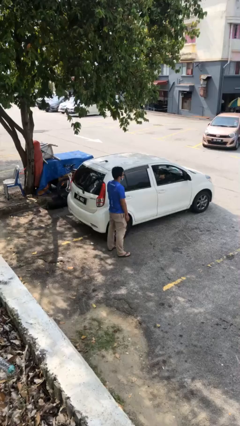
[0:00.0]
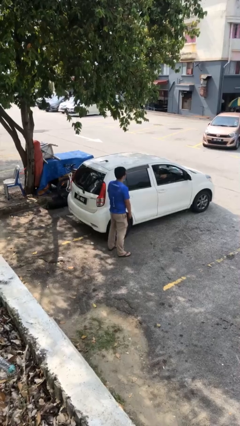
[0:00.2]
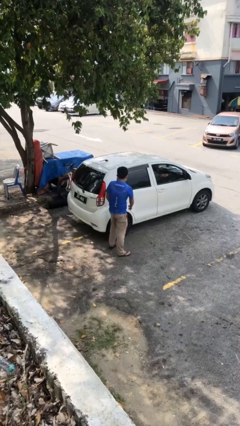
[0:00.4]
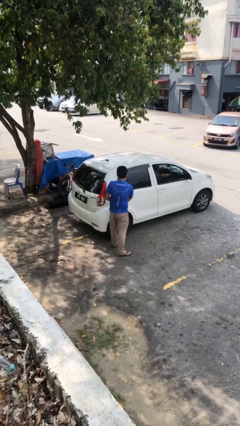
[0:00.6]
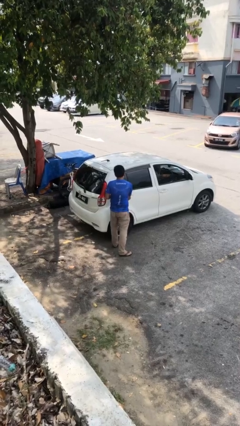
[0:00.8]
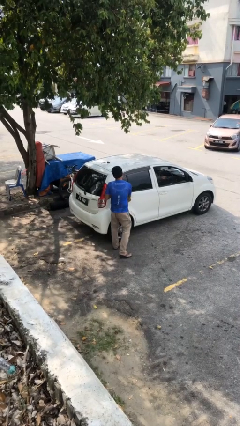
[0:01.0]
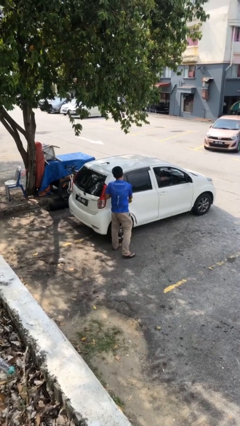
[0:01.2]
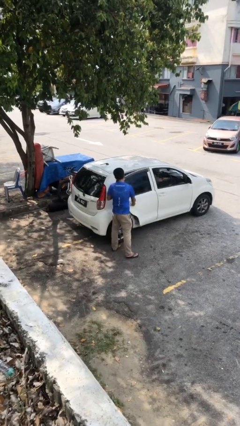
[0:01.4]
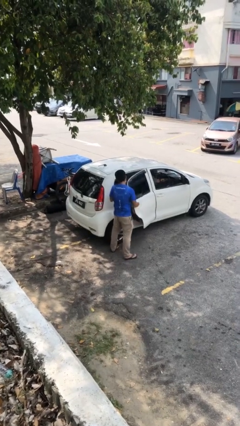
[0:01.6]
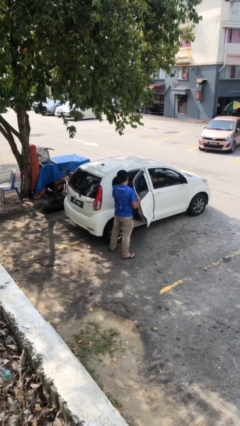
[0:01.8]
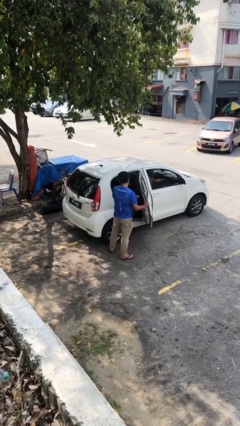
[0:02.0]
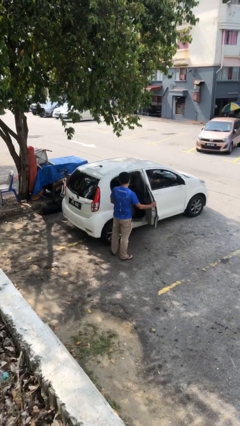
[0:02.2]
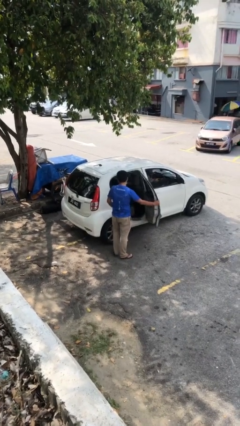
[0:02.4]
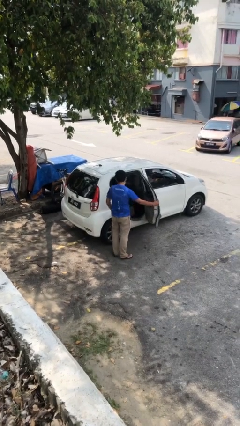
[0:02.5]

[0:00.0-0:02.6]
person opens car door

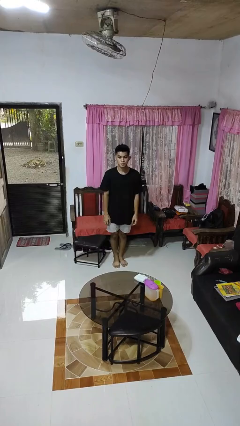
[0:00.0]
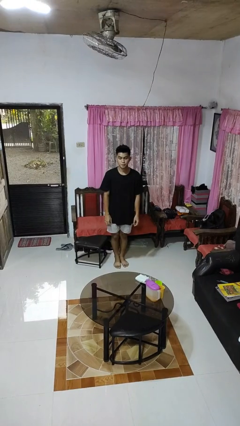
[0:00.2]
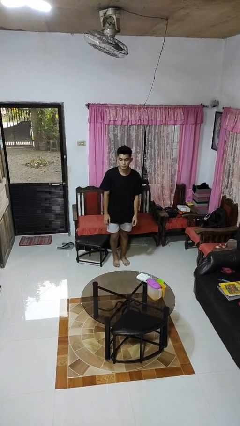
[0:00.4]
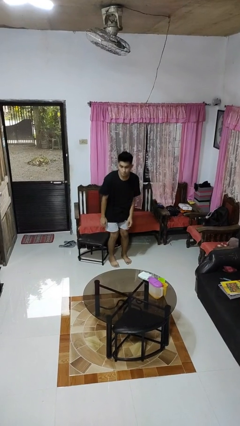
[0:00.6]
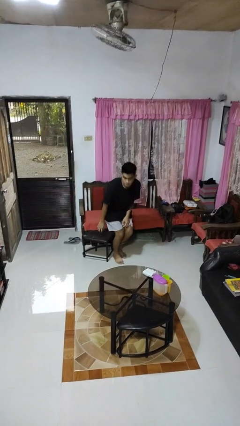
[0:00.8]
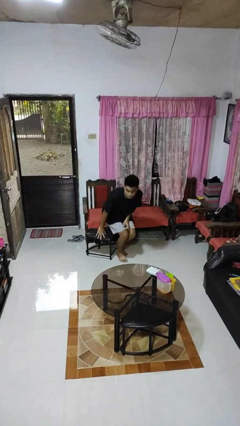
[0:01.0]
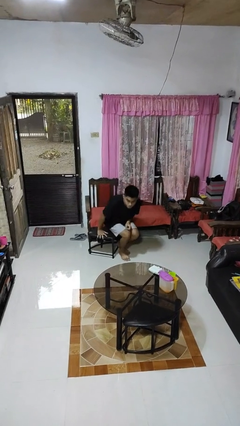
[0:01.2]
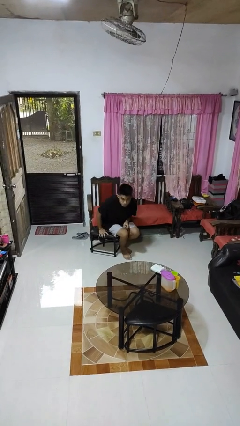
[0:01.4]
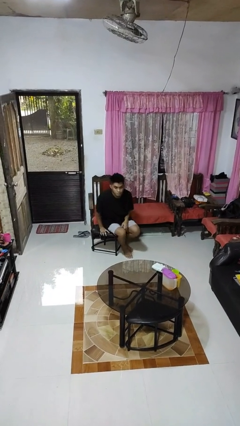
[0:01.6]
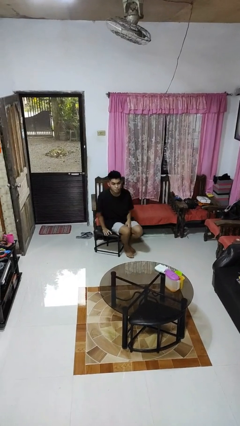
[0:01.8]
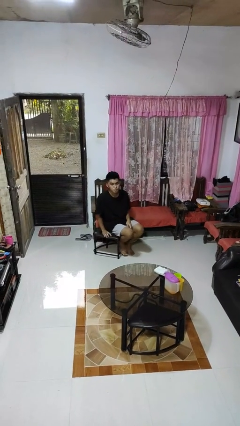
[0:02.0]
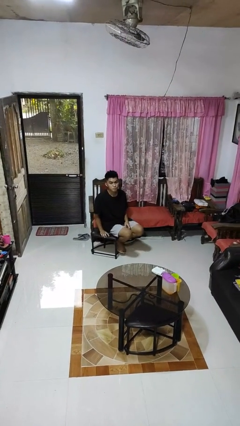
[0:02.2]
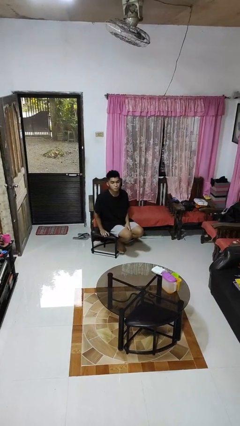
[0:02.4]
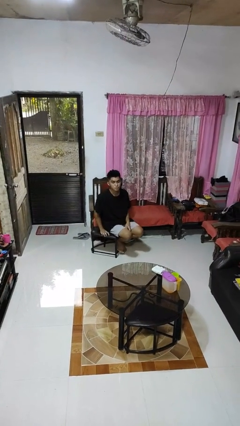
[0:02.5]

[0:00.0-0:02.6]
person sits down

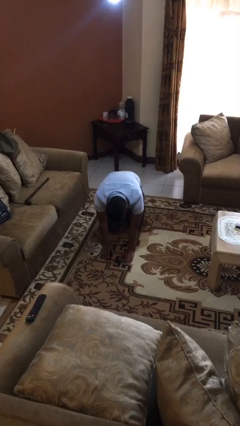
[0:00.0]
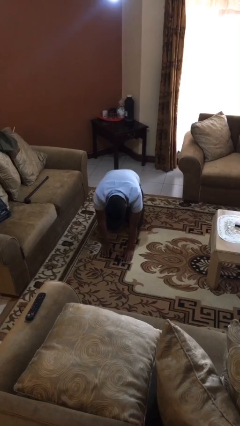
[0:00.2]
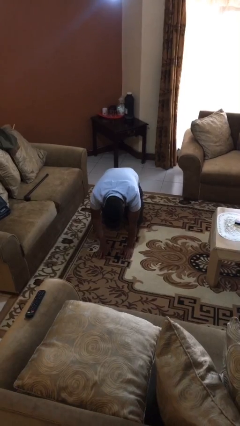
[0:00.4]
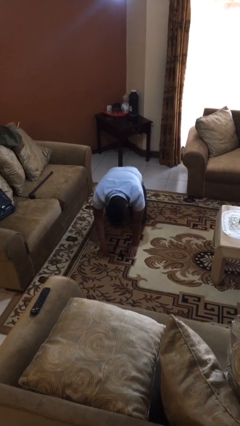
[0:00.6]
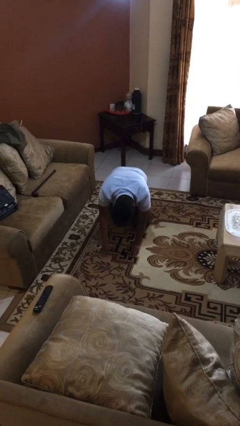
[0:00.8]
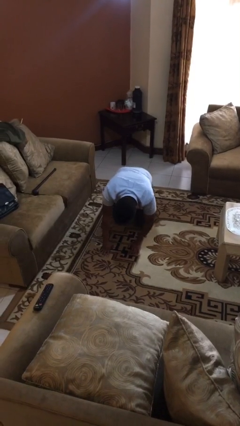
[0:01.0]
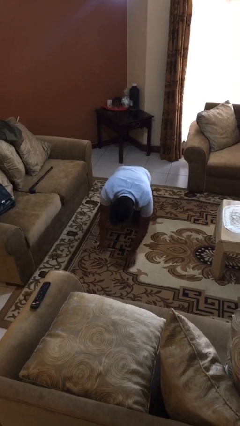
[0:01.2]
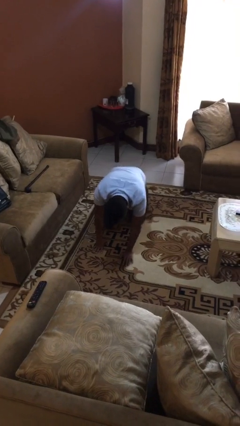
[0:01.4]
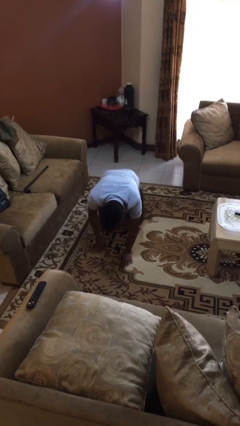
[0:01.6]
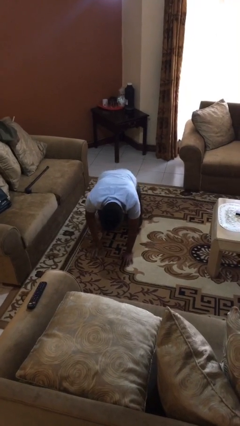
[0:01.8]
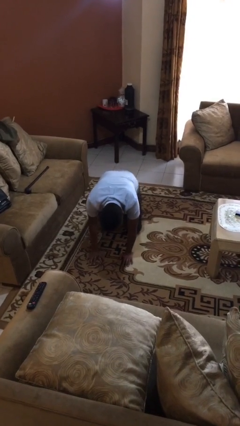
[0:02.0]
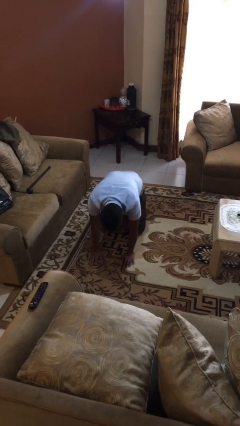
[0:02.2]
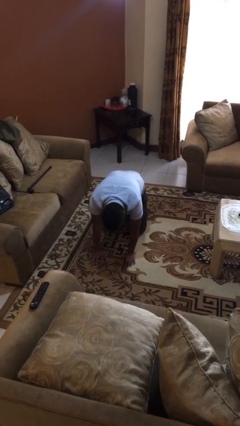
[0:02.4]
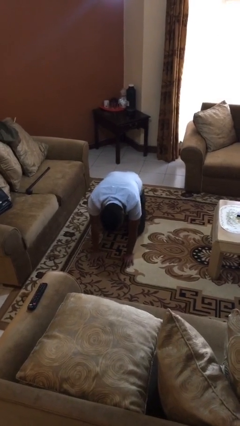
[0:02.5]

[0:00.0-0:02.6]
person crawls

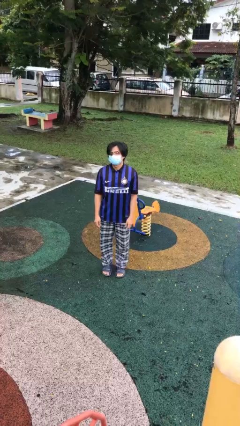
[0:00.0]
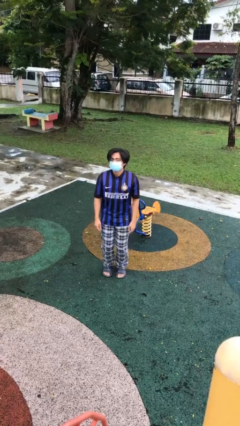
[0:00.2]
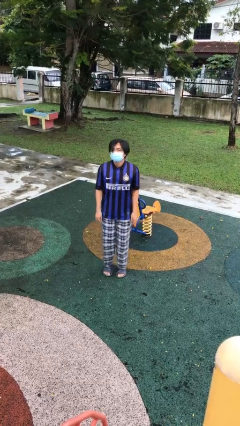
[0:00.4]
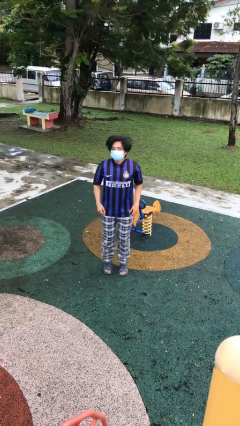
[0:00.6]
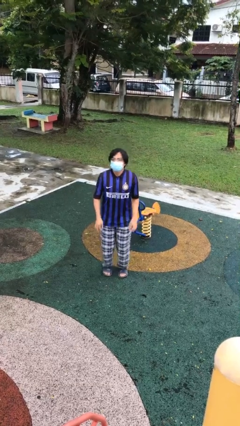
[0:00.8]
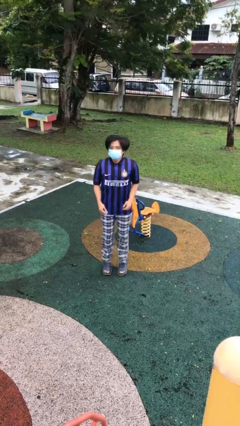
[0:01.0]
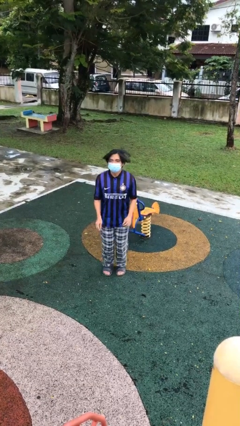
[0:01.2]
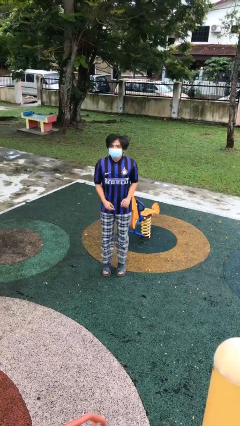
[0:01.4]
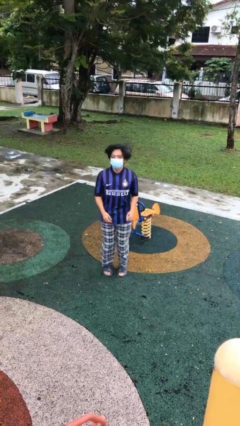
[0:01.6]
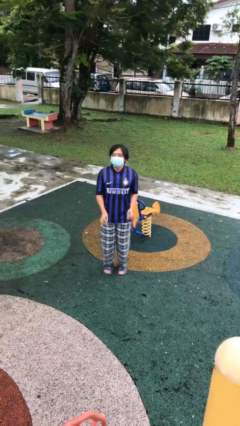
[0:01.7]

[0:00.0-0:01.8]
person jumps

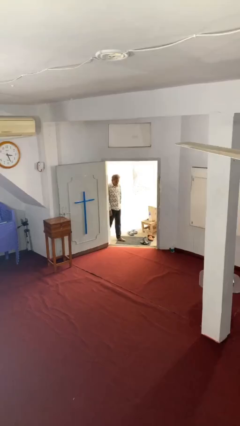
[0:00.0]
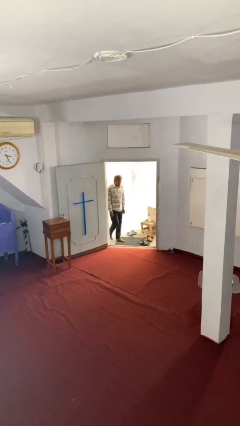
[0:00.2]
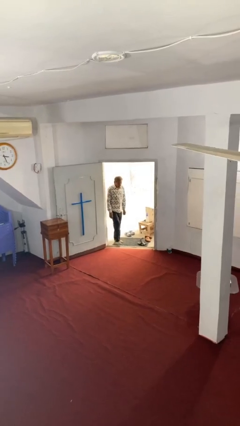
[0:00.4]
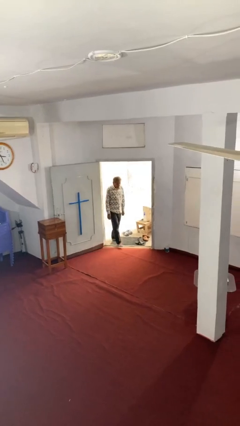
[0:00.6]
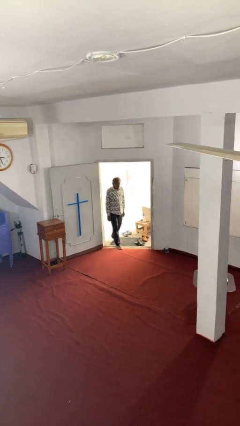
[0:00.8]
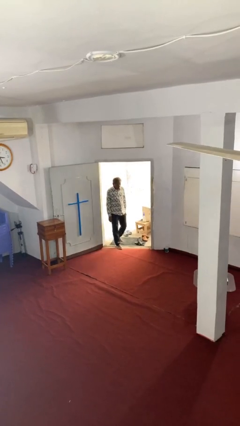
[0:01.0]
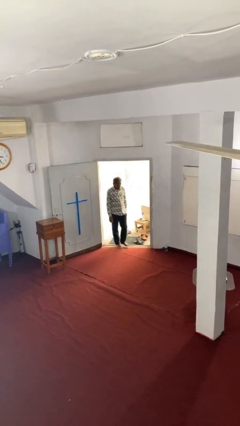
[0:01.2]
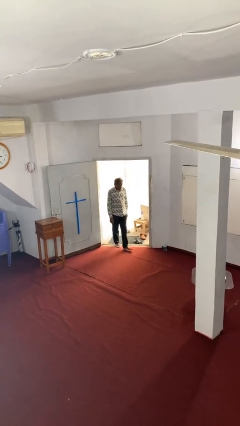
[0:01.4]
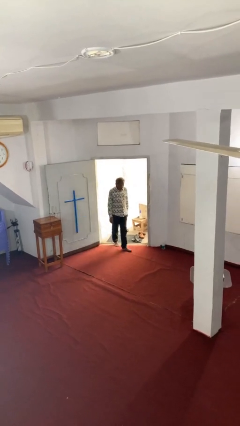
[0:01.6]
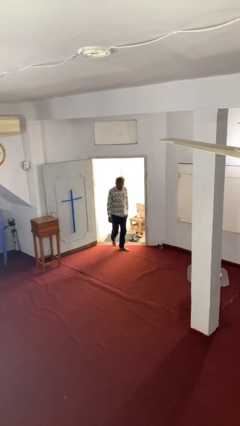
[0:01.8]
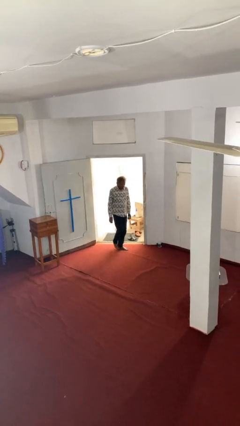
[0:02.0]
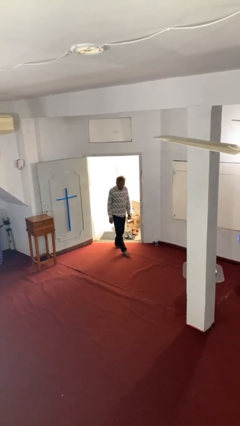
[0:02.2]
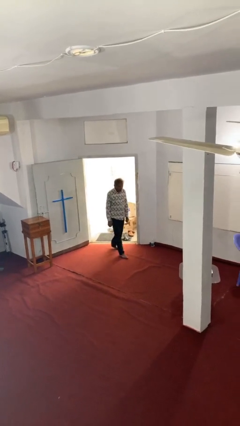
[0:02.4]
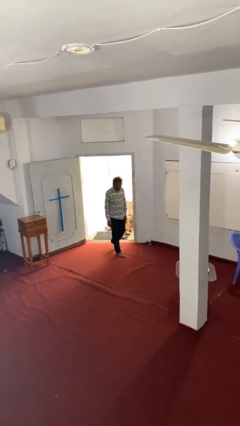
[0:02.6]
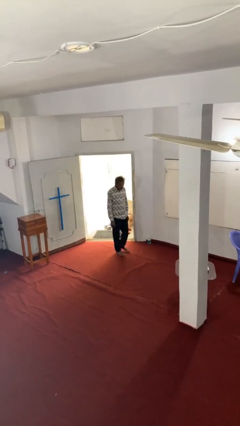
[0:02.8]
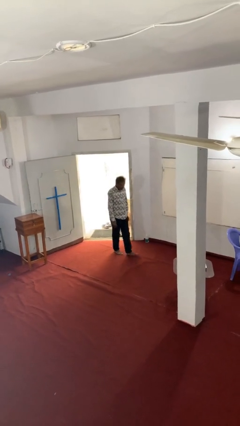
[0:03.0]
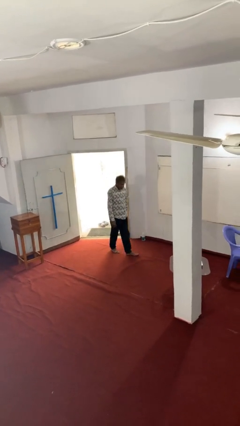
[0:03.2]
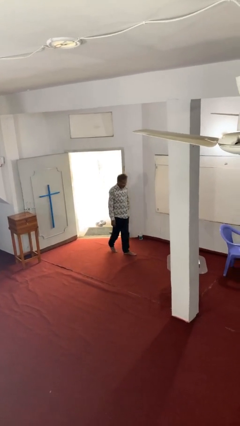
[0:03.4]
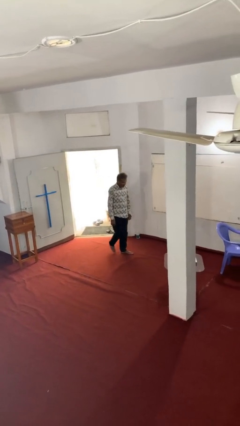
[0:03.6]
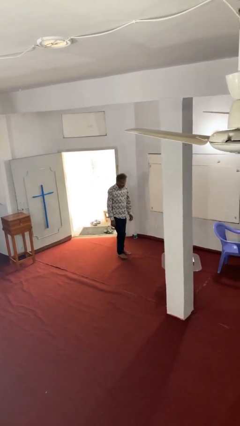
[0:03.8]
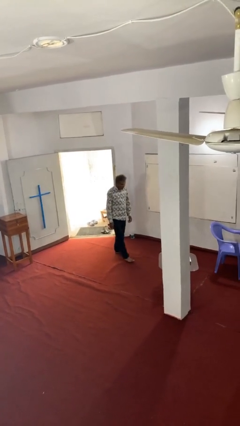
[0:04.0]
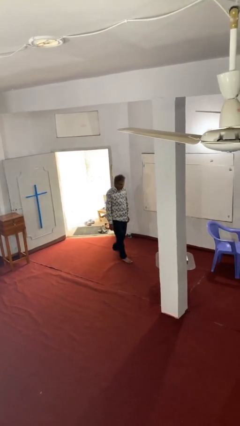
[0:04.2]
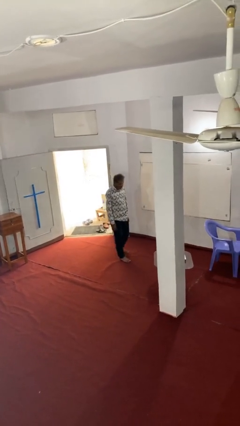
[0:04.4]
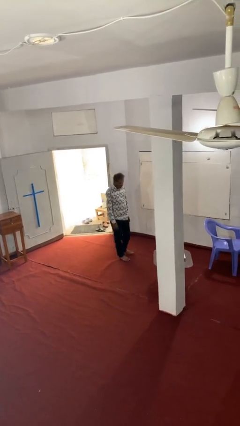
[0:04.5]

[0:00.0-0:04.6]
person enters scene through structure

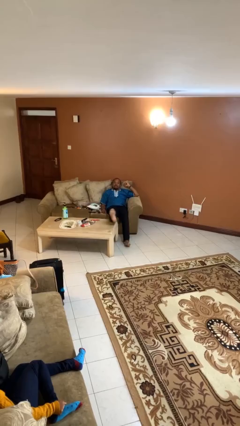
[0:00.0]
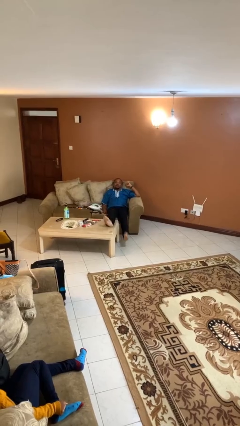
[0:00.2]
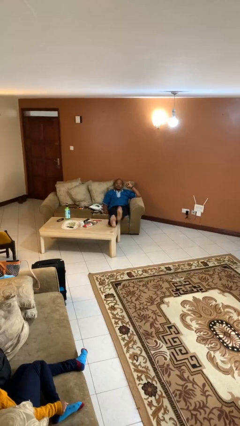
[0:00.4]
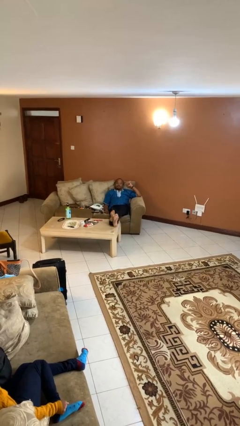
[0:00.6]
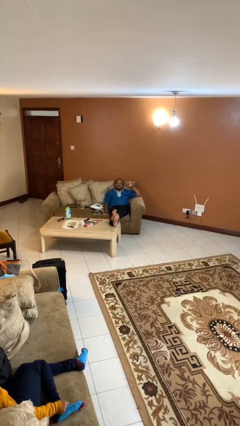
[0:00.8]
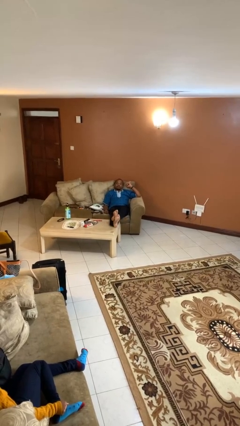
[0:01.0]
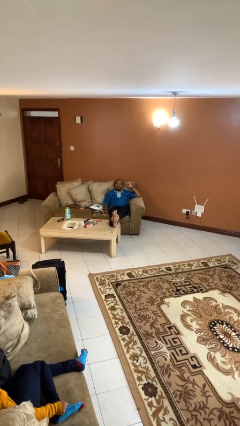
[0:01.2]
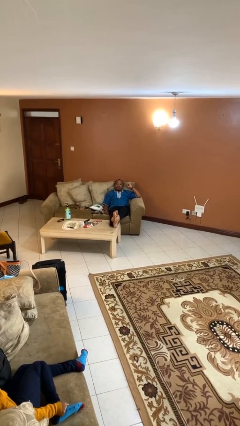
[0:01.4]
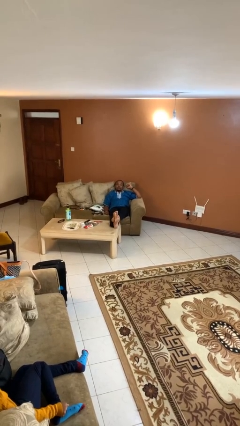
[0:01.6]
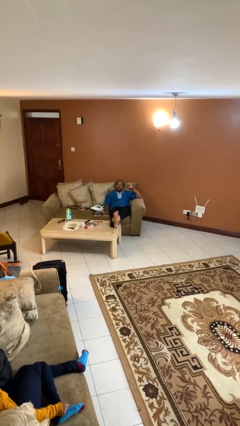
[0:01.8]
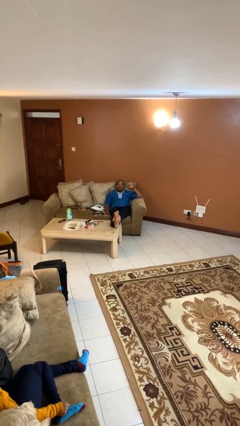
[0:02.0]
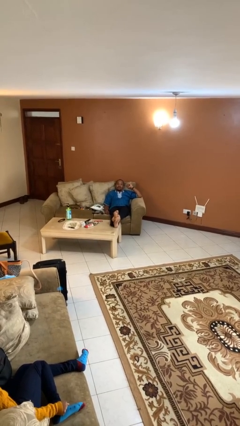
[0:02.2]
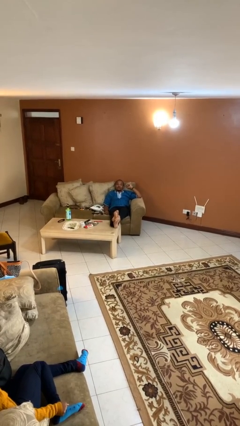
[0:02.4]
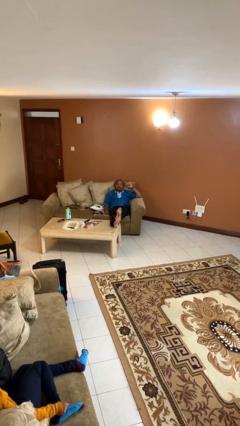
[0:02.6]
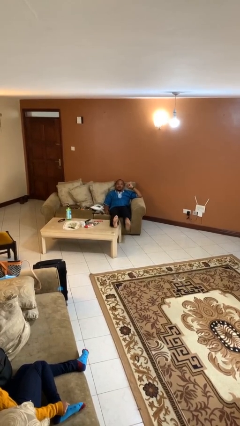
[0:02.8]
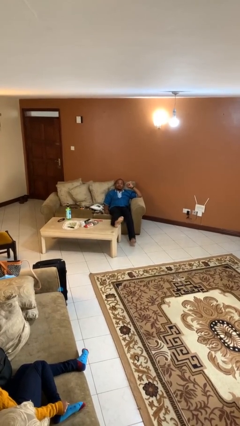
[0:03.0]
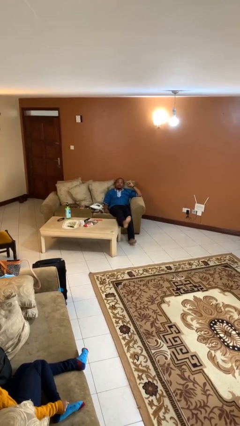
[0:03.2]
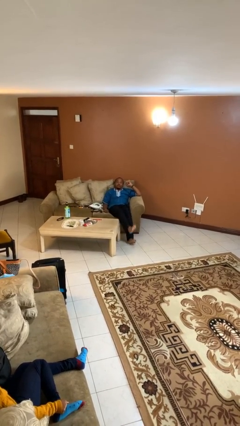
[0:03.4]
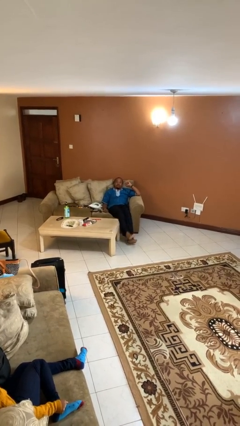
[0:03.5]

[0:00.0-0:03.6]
person puts feet up
